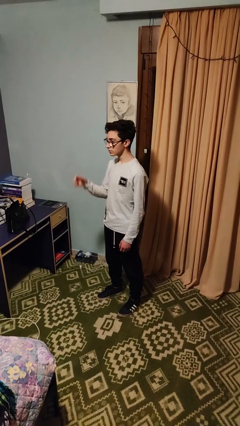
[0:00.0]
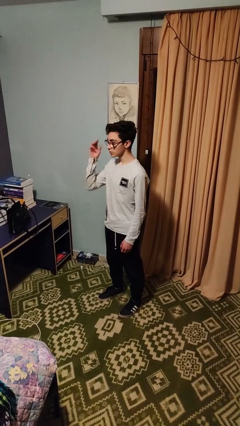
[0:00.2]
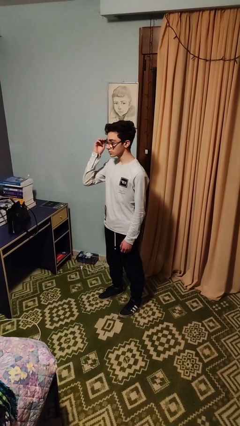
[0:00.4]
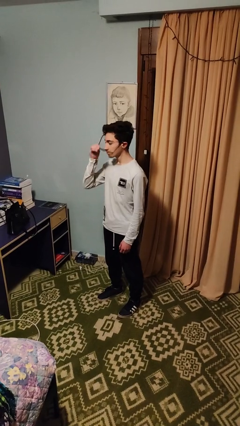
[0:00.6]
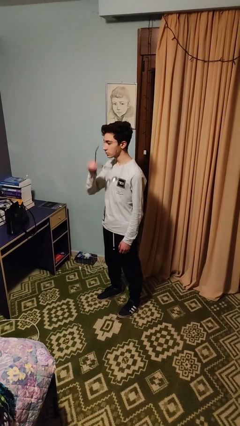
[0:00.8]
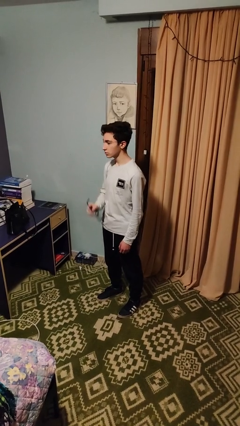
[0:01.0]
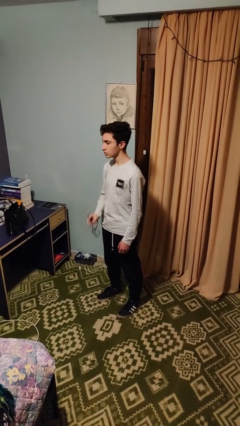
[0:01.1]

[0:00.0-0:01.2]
person takes off glasses

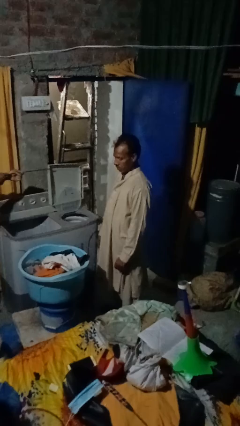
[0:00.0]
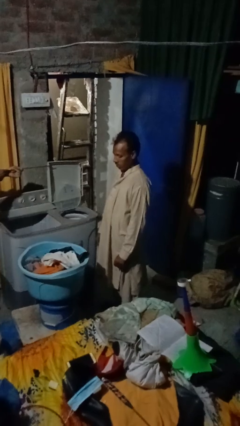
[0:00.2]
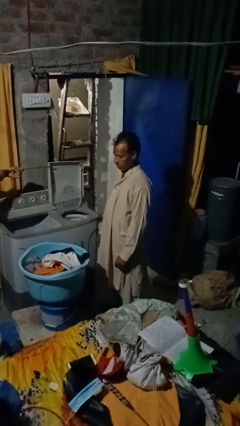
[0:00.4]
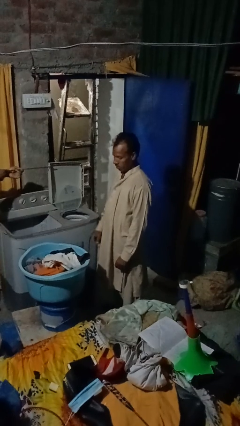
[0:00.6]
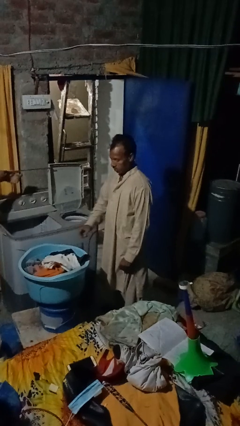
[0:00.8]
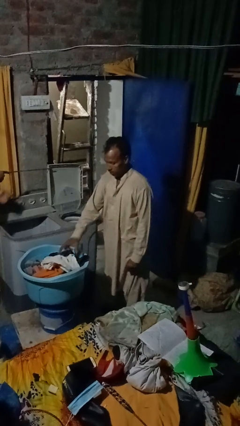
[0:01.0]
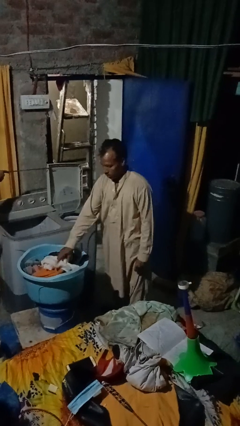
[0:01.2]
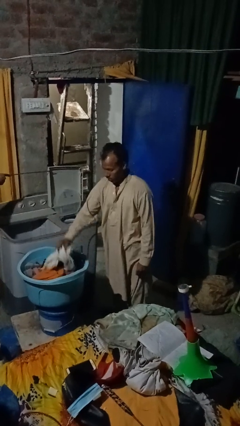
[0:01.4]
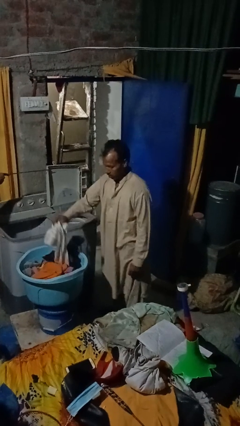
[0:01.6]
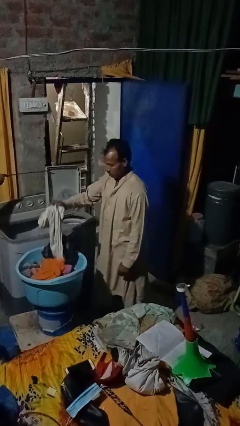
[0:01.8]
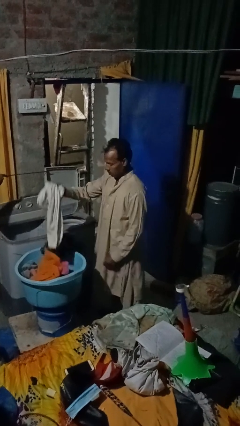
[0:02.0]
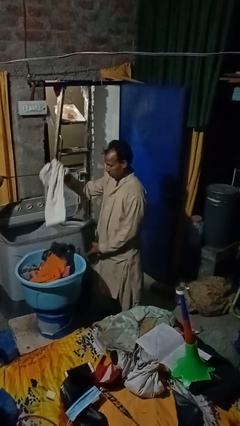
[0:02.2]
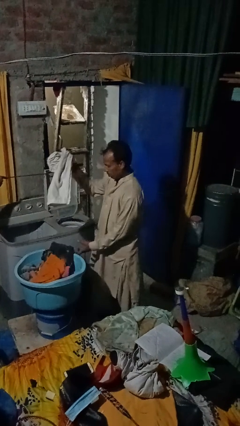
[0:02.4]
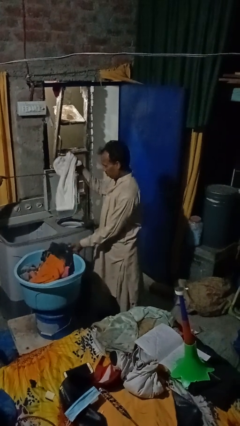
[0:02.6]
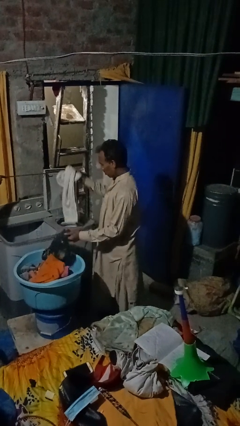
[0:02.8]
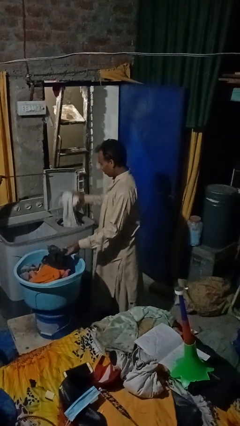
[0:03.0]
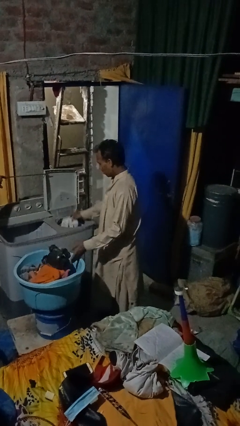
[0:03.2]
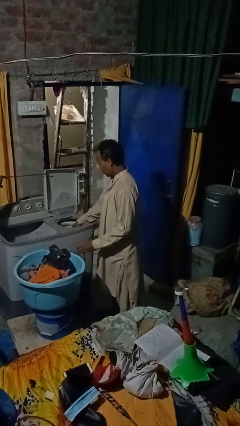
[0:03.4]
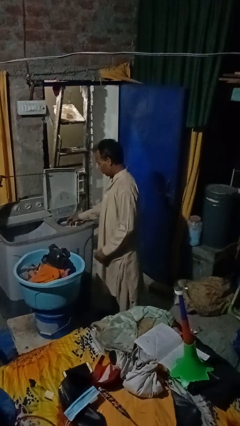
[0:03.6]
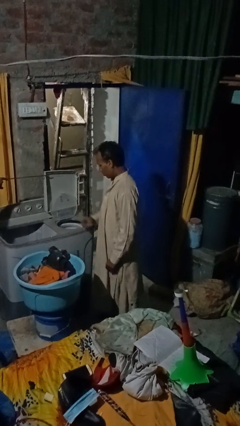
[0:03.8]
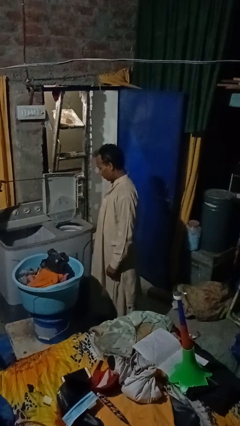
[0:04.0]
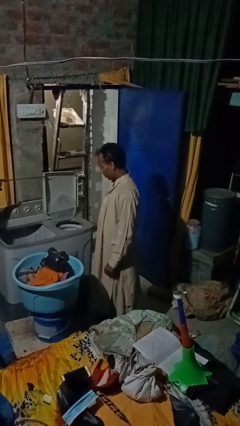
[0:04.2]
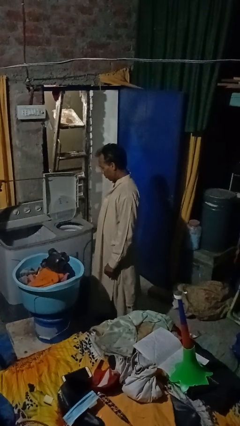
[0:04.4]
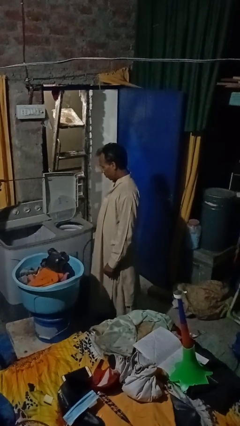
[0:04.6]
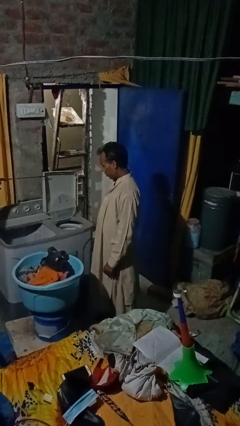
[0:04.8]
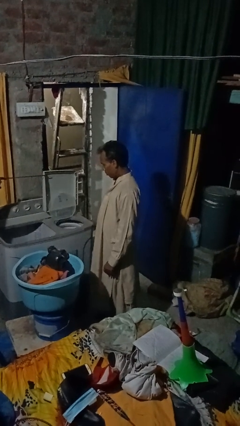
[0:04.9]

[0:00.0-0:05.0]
person loads dryer

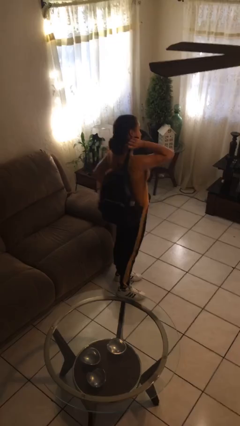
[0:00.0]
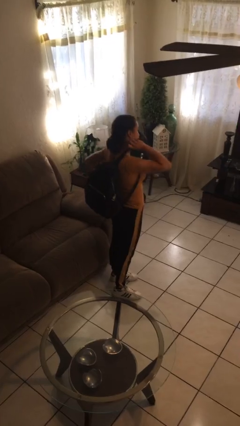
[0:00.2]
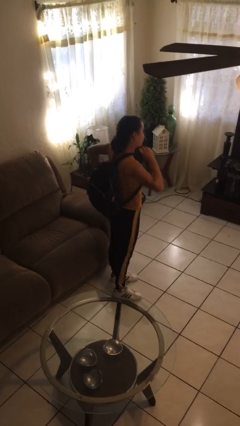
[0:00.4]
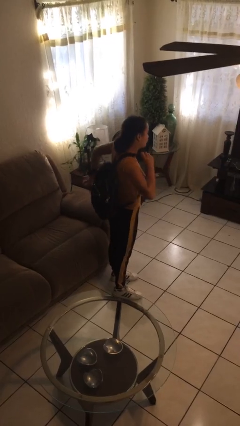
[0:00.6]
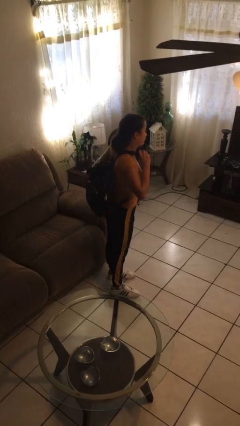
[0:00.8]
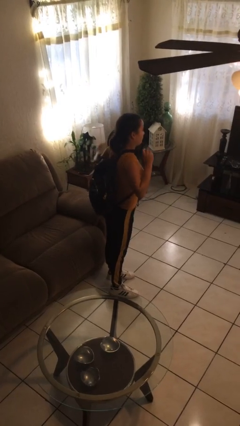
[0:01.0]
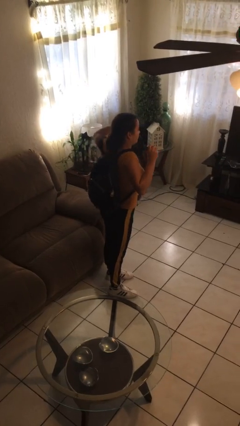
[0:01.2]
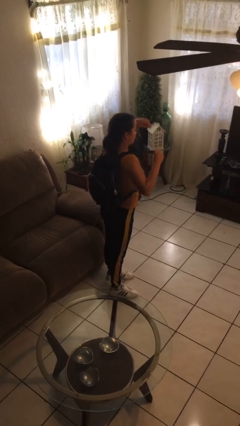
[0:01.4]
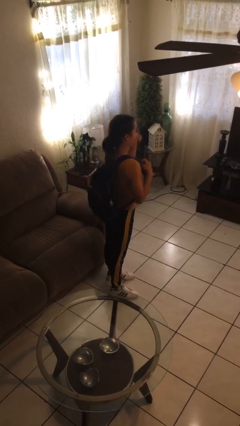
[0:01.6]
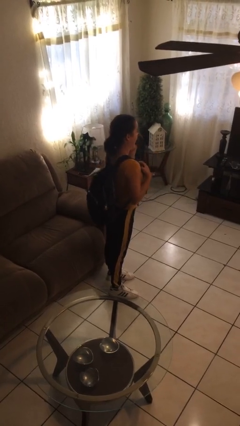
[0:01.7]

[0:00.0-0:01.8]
person puts on backpack

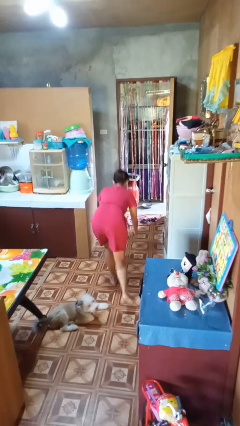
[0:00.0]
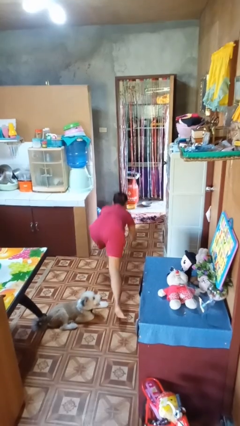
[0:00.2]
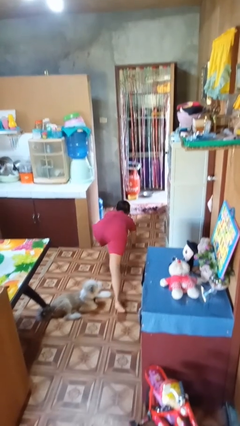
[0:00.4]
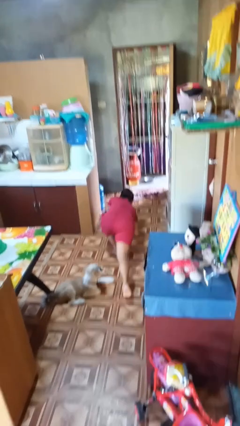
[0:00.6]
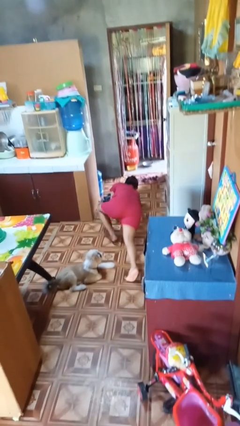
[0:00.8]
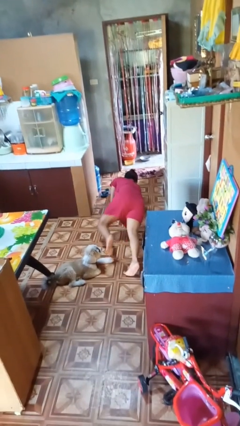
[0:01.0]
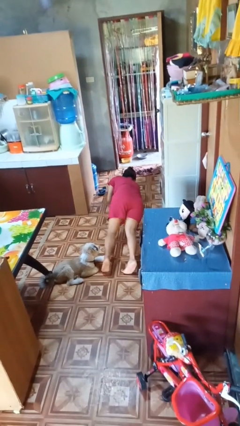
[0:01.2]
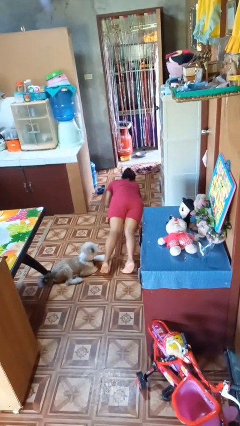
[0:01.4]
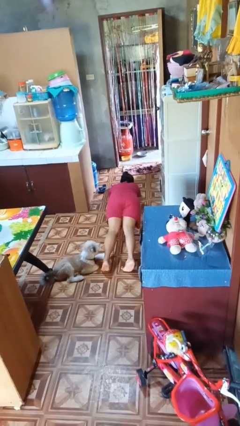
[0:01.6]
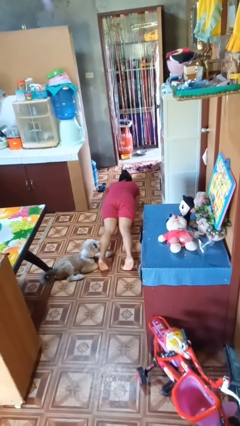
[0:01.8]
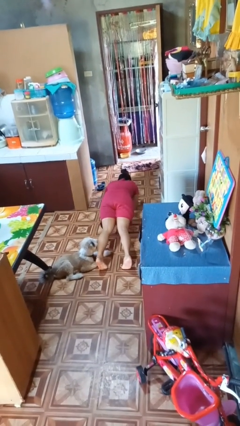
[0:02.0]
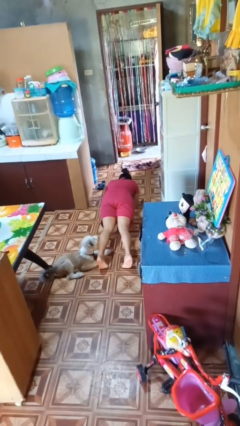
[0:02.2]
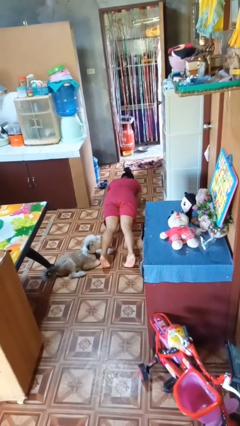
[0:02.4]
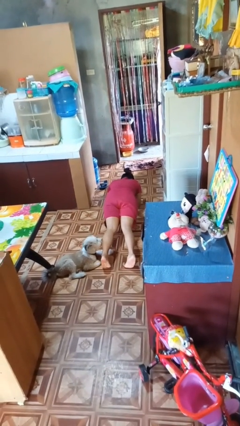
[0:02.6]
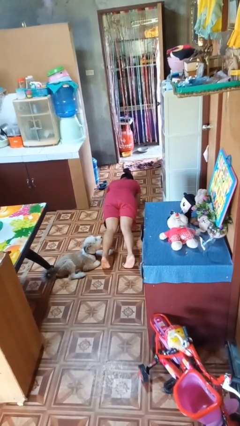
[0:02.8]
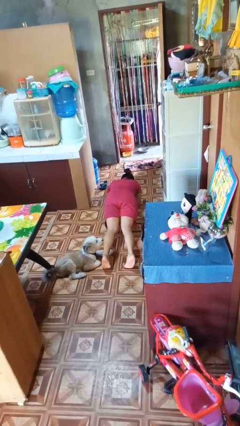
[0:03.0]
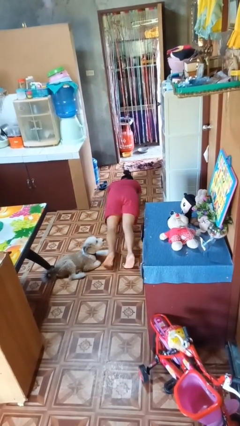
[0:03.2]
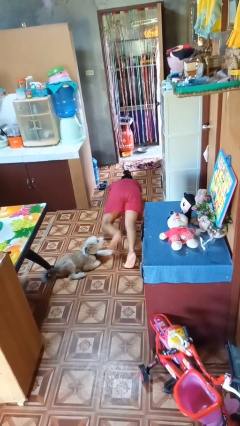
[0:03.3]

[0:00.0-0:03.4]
person exercises with plank

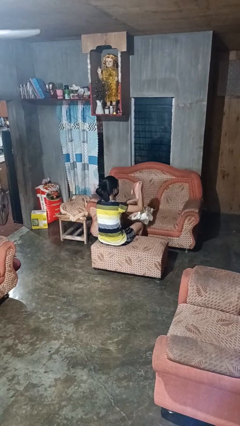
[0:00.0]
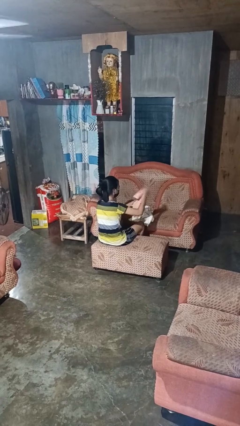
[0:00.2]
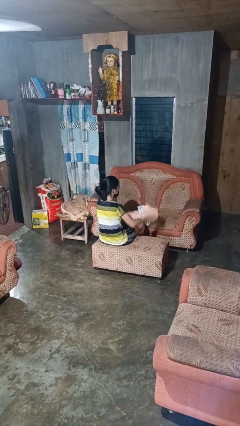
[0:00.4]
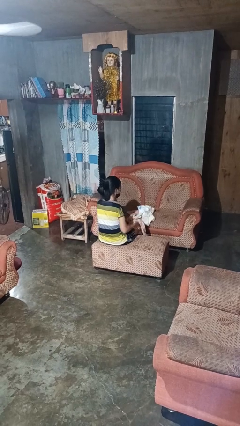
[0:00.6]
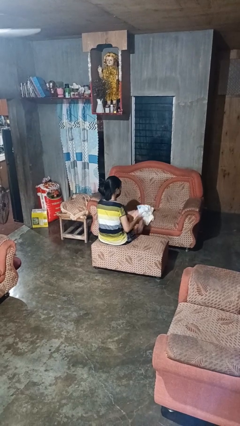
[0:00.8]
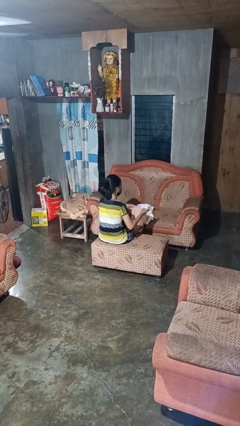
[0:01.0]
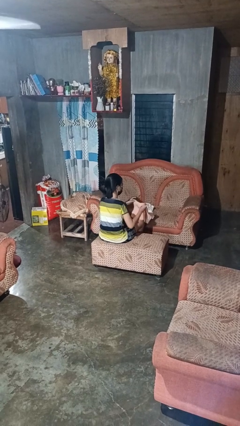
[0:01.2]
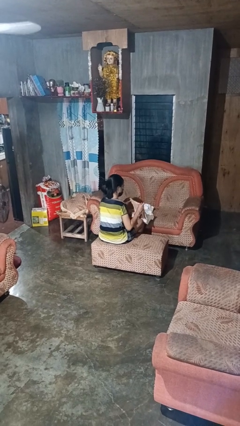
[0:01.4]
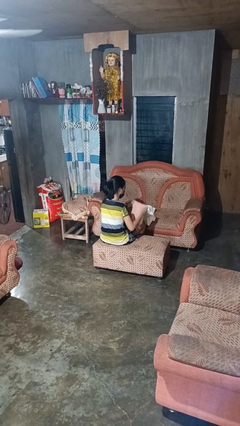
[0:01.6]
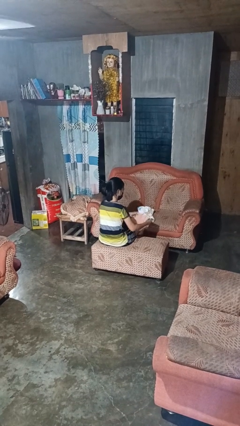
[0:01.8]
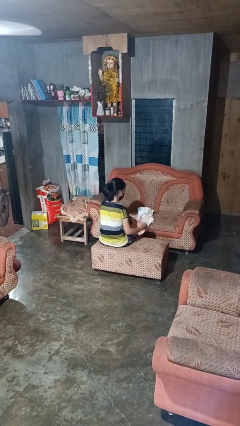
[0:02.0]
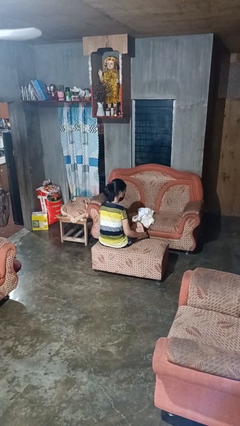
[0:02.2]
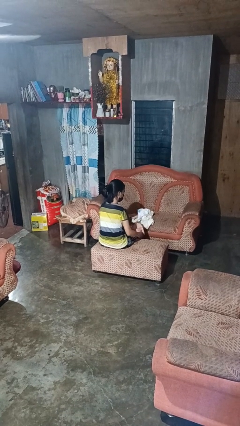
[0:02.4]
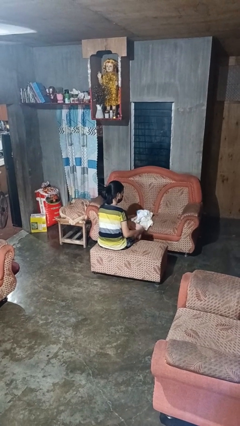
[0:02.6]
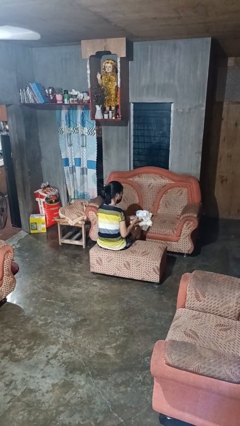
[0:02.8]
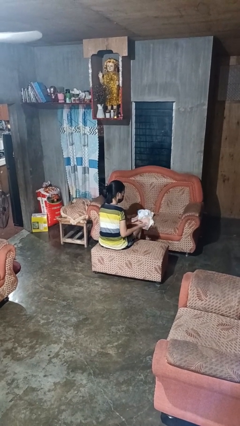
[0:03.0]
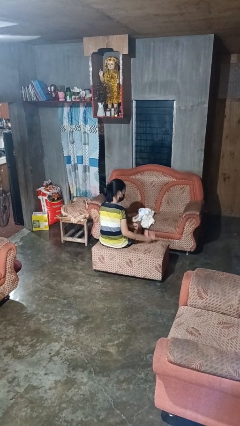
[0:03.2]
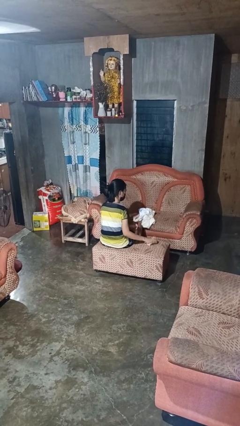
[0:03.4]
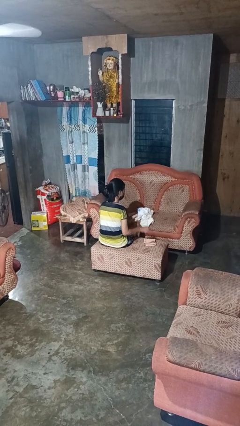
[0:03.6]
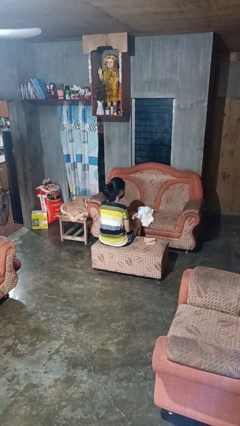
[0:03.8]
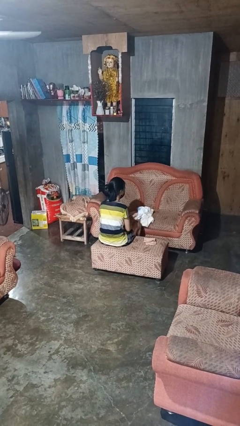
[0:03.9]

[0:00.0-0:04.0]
person folds towel

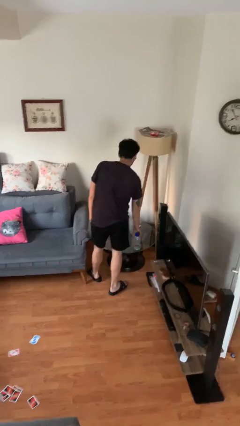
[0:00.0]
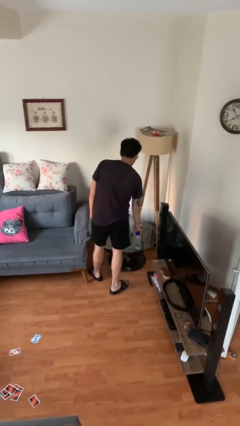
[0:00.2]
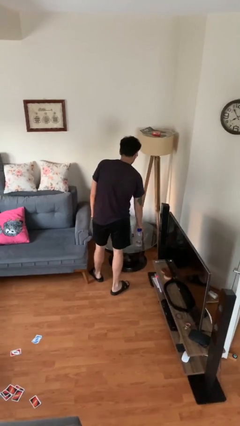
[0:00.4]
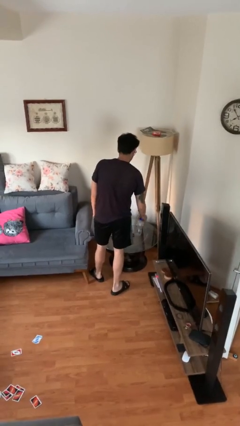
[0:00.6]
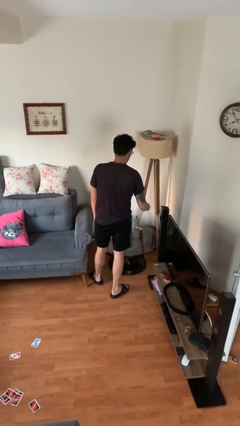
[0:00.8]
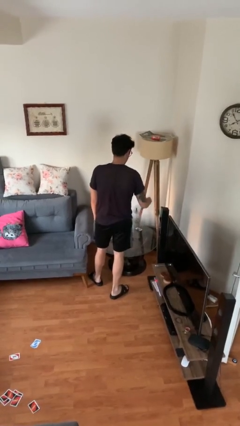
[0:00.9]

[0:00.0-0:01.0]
person picks up object from table

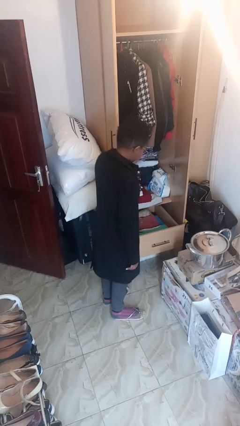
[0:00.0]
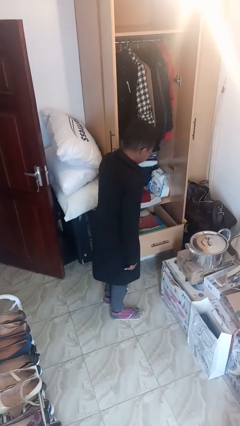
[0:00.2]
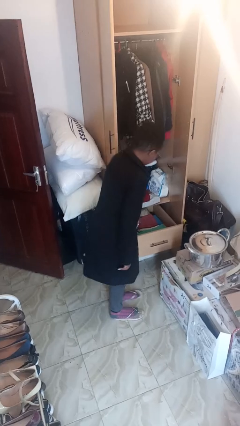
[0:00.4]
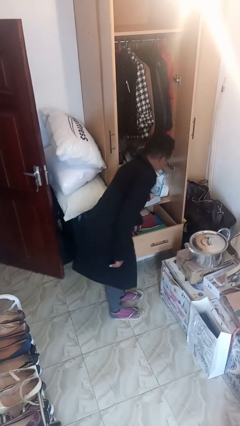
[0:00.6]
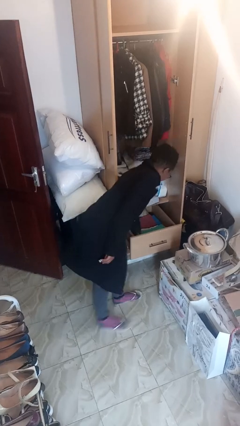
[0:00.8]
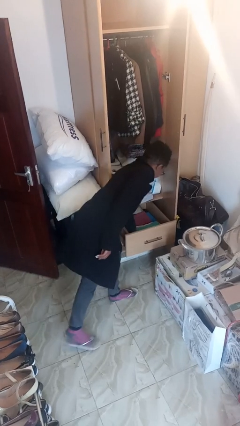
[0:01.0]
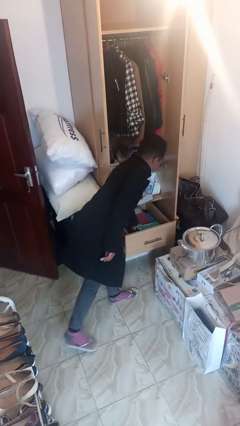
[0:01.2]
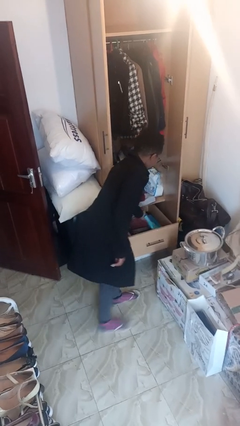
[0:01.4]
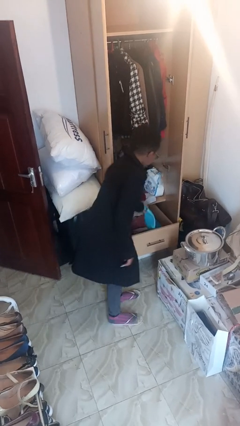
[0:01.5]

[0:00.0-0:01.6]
person takes clothes from dresser
